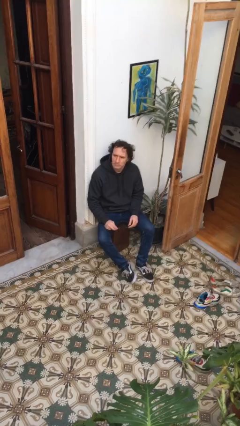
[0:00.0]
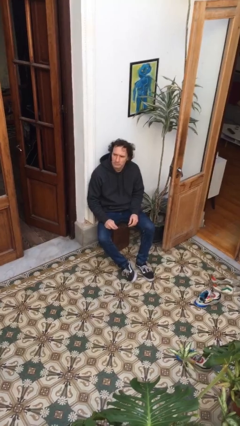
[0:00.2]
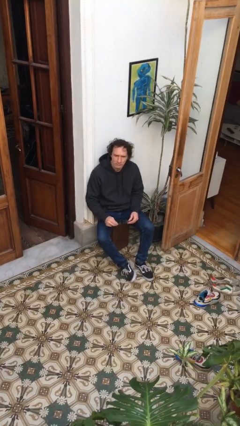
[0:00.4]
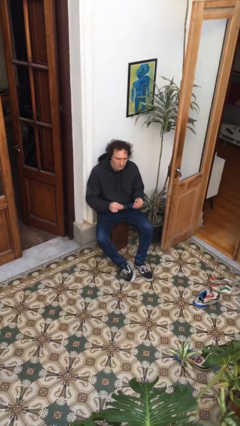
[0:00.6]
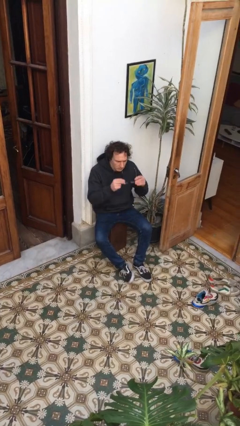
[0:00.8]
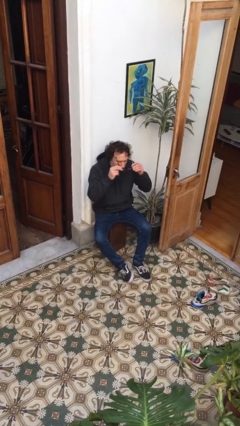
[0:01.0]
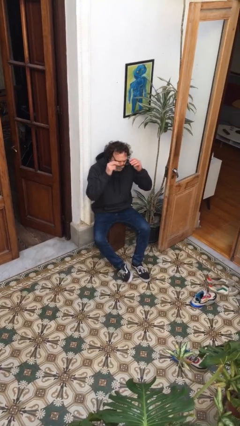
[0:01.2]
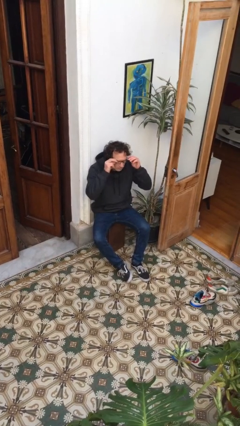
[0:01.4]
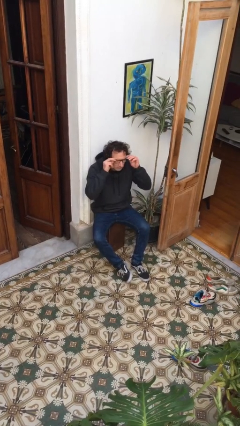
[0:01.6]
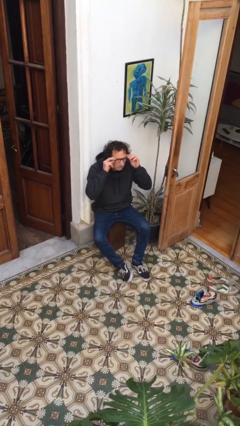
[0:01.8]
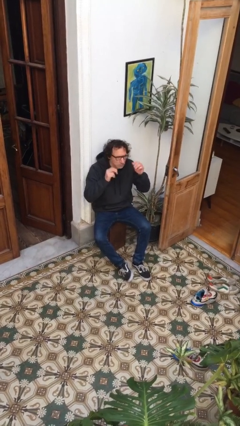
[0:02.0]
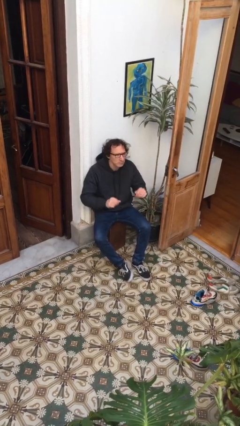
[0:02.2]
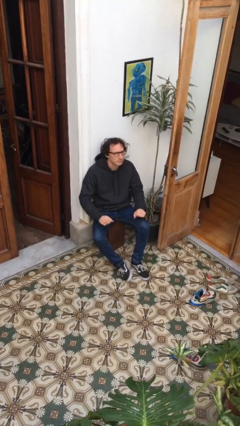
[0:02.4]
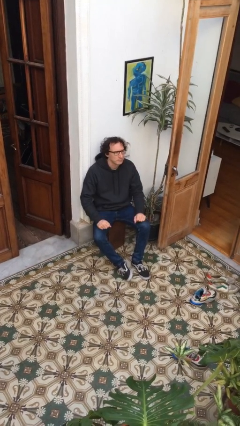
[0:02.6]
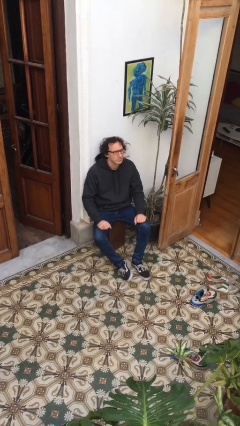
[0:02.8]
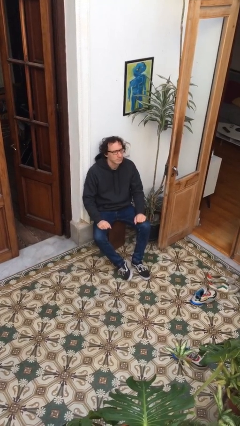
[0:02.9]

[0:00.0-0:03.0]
person puts on glasses

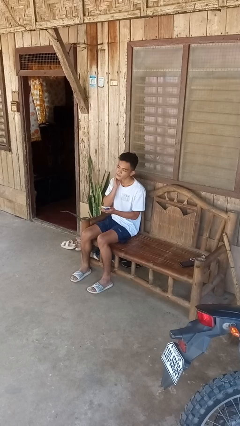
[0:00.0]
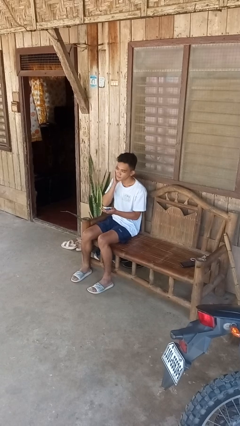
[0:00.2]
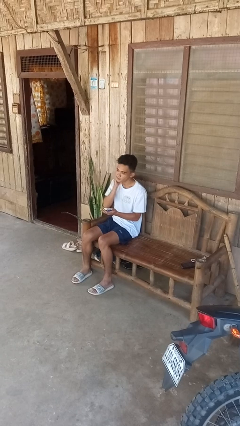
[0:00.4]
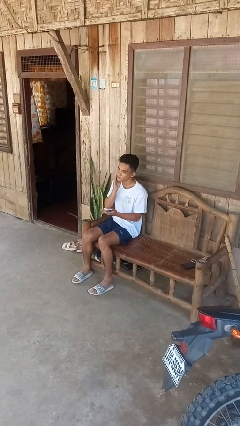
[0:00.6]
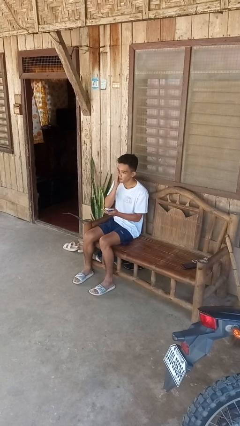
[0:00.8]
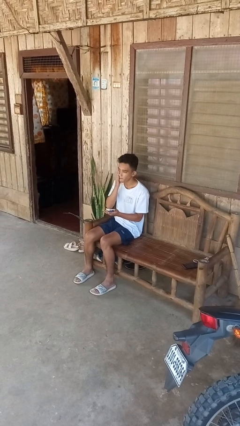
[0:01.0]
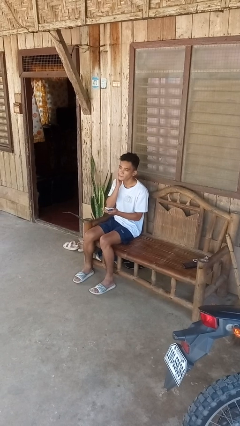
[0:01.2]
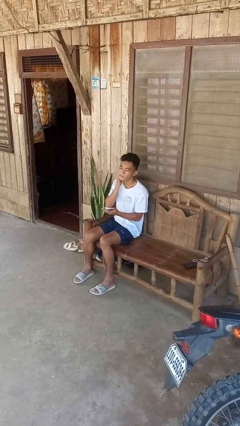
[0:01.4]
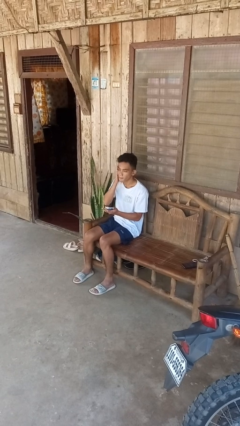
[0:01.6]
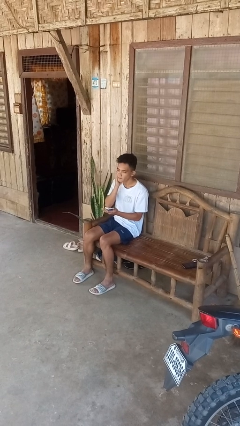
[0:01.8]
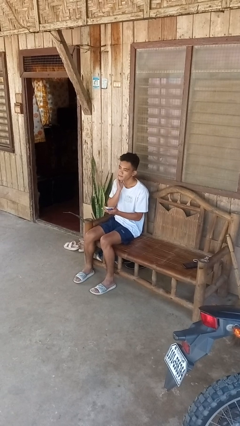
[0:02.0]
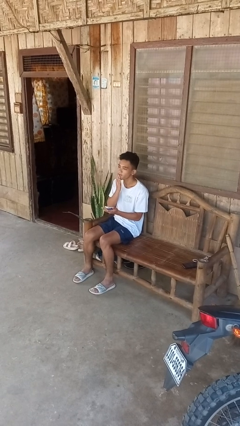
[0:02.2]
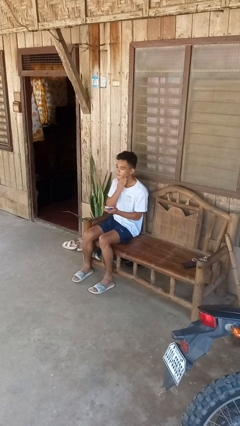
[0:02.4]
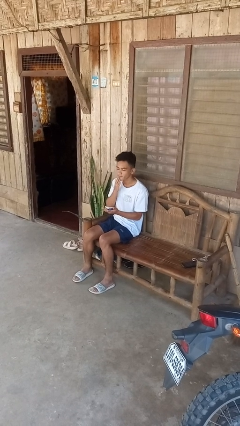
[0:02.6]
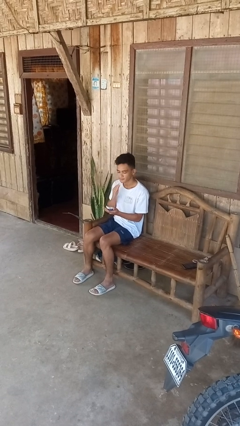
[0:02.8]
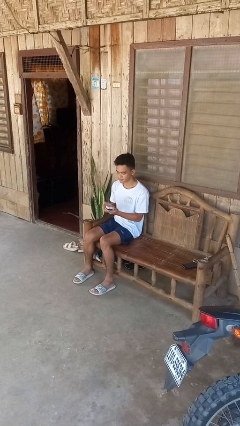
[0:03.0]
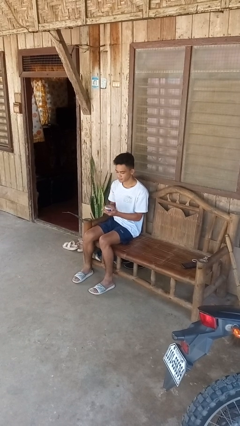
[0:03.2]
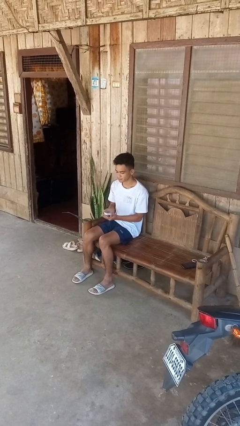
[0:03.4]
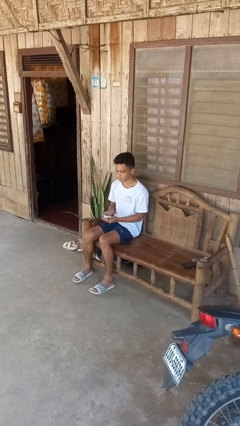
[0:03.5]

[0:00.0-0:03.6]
person applies facial moisturizer

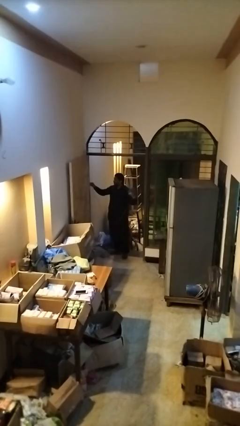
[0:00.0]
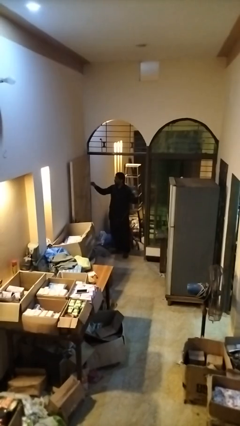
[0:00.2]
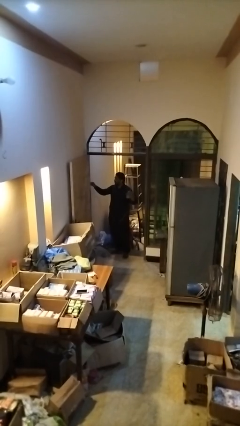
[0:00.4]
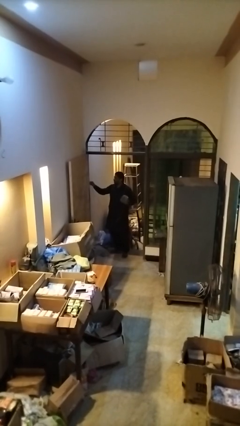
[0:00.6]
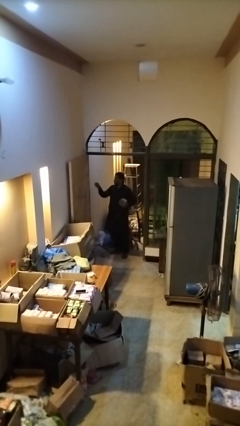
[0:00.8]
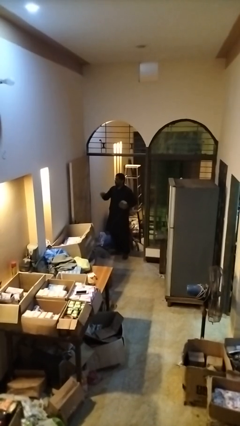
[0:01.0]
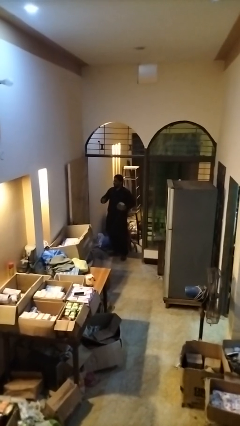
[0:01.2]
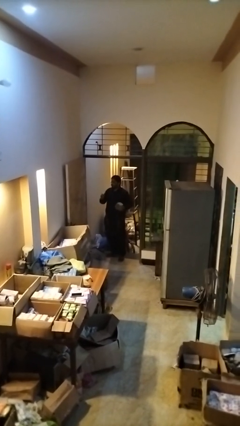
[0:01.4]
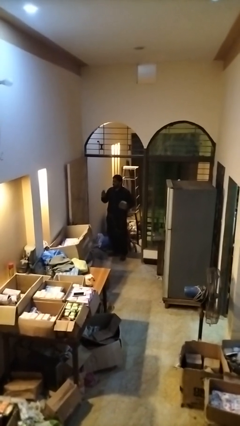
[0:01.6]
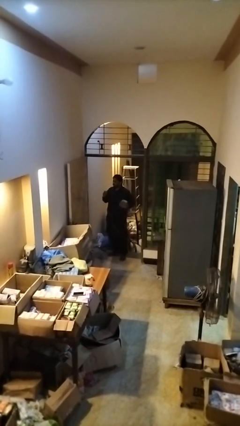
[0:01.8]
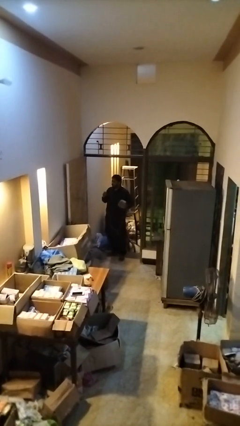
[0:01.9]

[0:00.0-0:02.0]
person unplugs from electrical socket

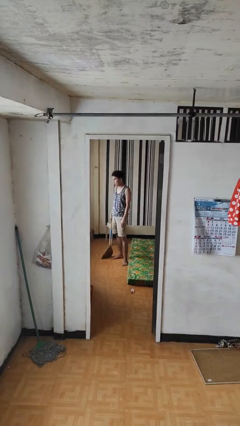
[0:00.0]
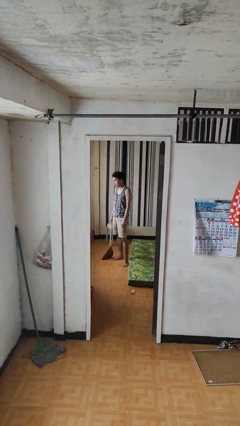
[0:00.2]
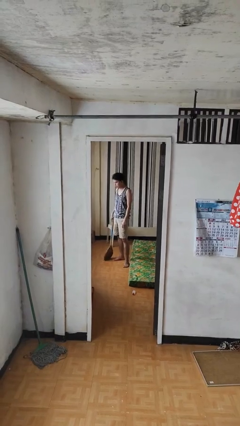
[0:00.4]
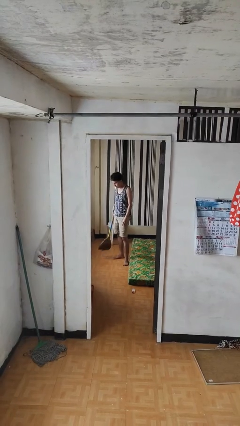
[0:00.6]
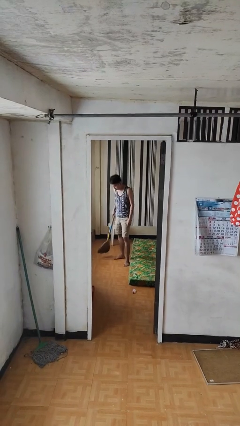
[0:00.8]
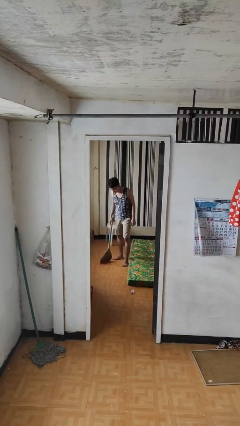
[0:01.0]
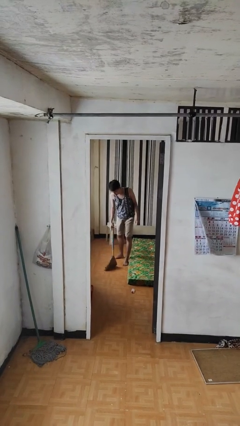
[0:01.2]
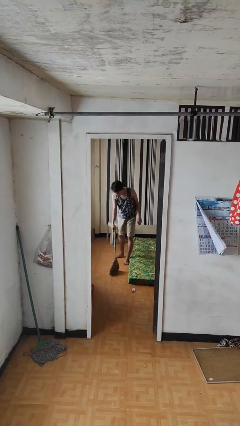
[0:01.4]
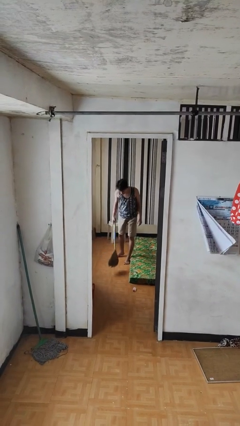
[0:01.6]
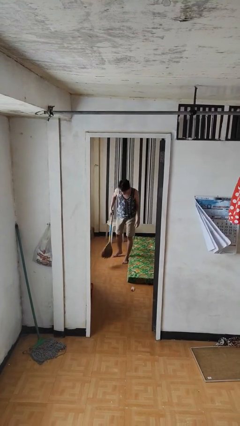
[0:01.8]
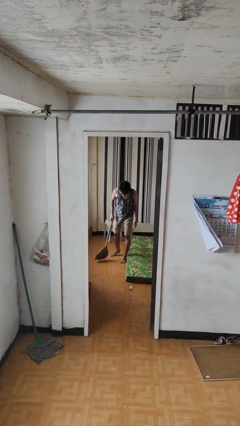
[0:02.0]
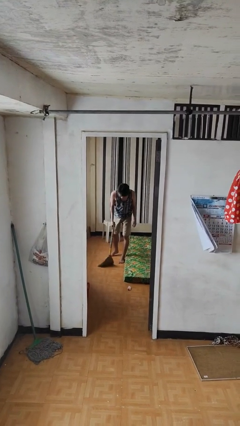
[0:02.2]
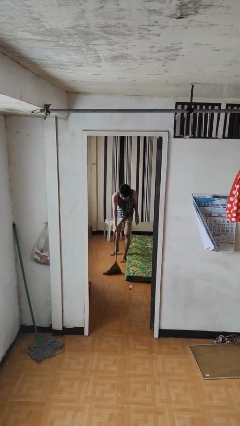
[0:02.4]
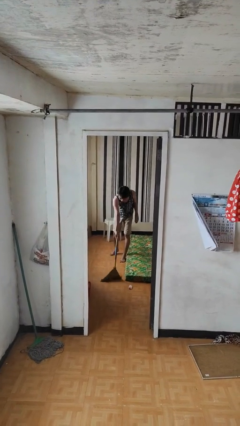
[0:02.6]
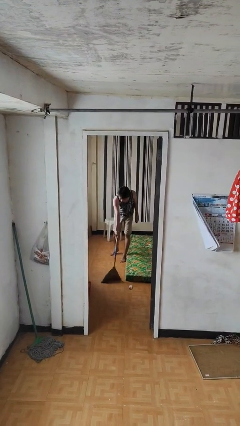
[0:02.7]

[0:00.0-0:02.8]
person sweeps floor

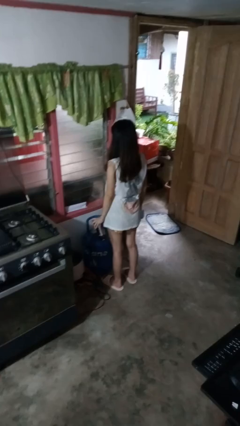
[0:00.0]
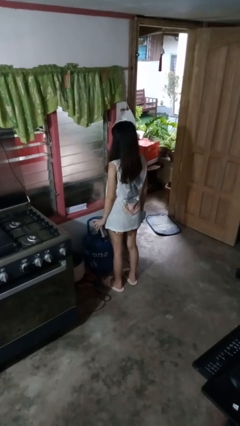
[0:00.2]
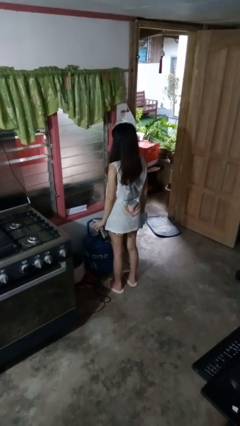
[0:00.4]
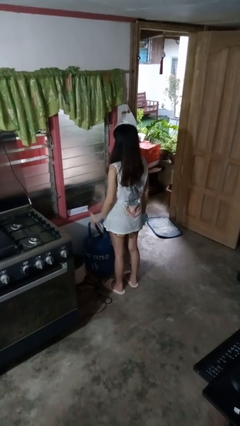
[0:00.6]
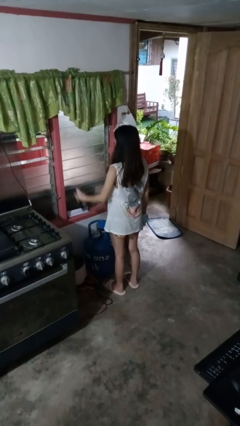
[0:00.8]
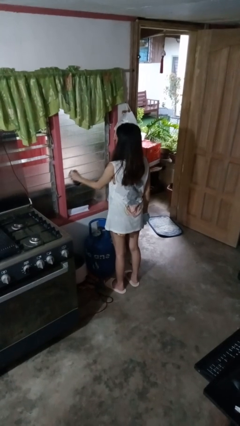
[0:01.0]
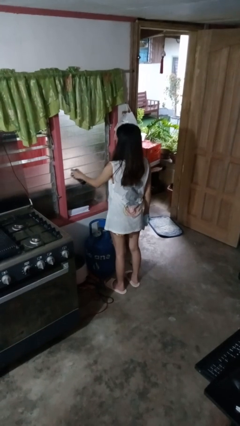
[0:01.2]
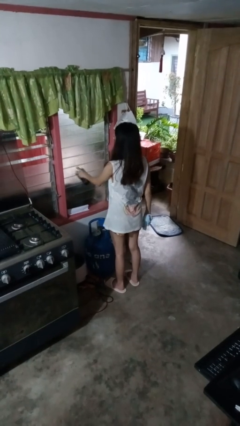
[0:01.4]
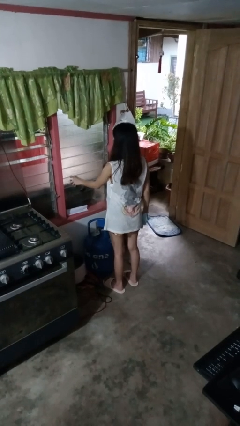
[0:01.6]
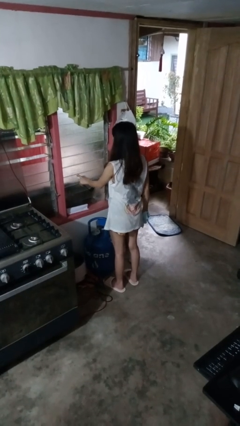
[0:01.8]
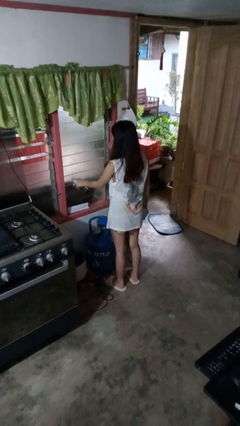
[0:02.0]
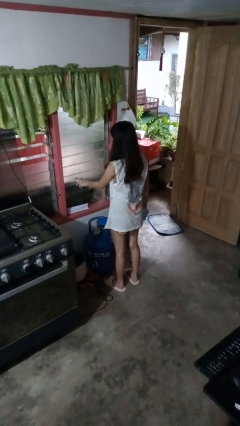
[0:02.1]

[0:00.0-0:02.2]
person sprays from bottle

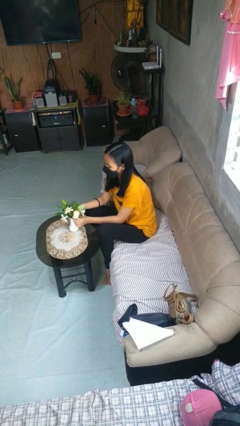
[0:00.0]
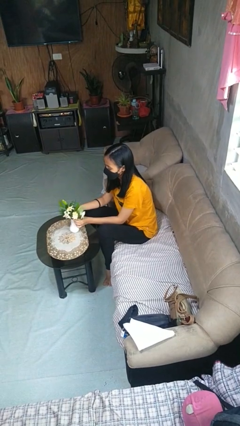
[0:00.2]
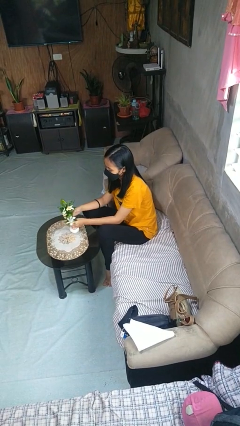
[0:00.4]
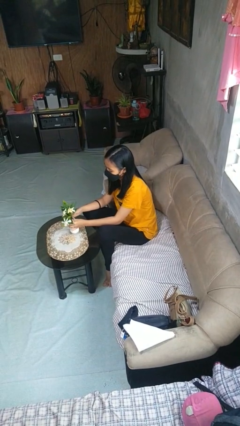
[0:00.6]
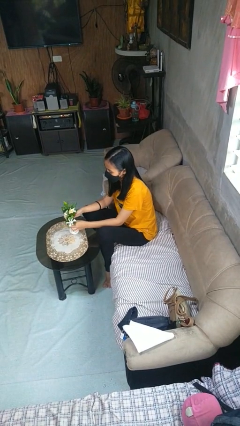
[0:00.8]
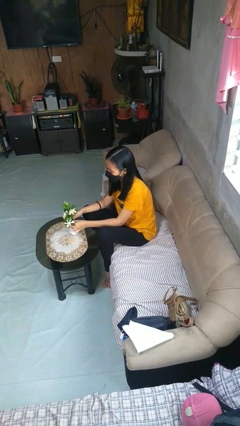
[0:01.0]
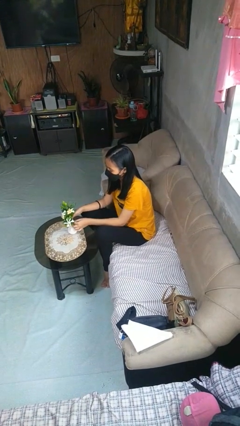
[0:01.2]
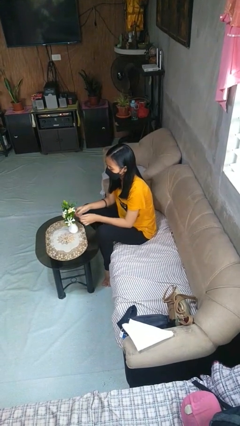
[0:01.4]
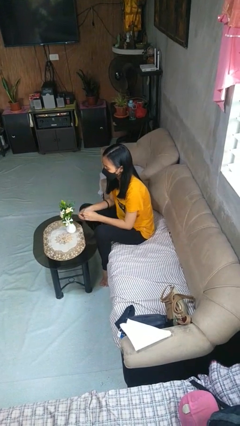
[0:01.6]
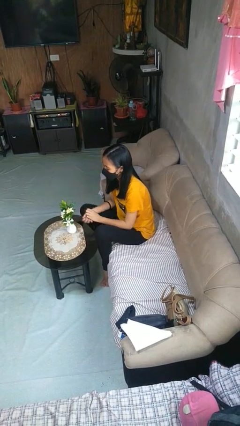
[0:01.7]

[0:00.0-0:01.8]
person arranges flowers in vase

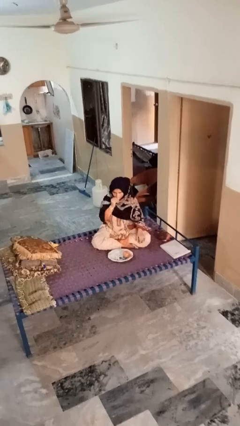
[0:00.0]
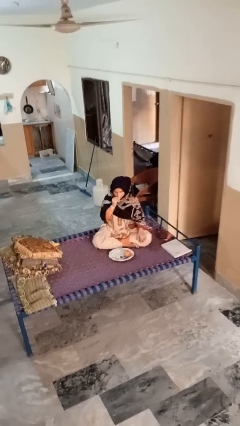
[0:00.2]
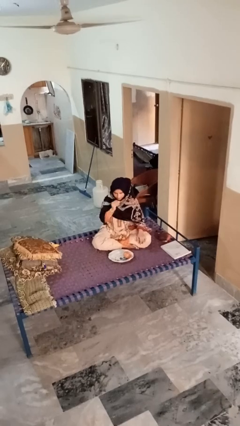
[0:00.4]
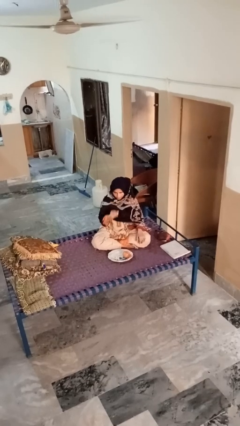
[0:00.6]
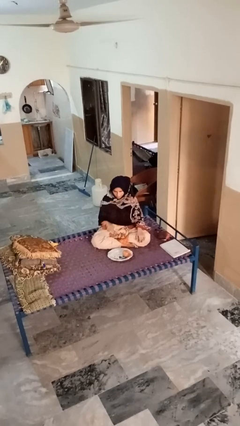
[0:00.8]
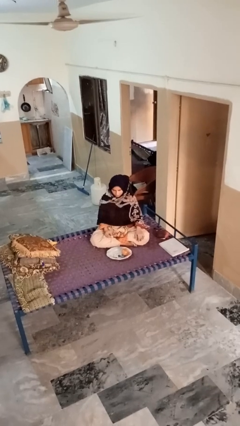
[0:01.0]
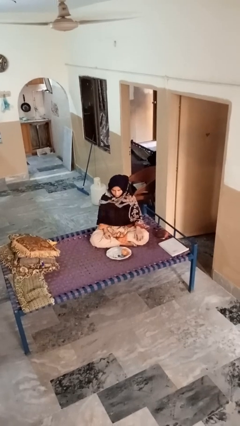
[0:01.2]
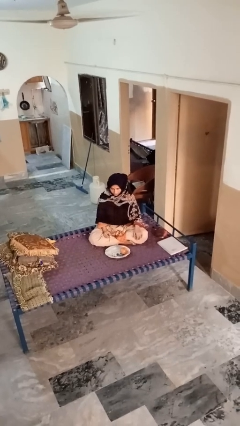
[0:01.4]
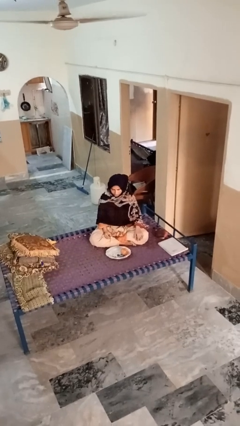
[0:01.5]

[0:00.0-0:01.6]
person eats apple
